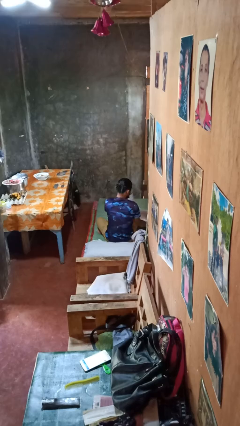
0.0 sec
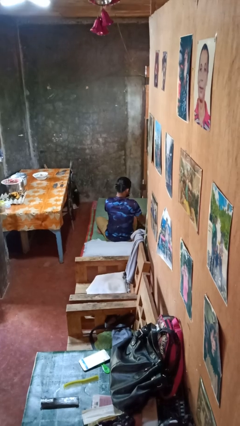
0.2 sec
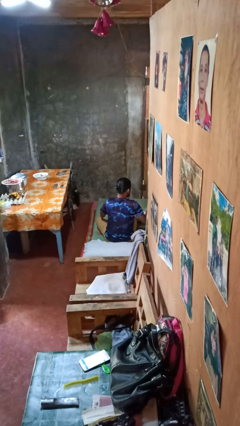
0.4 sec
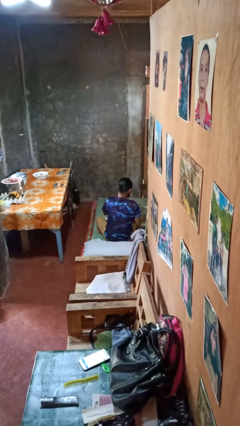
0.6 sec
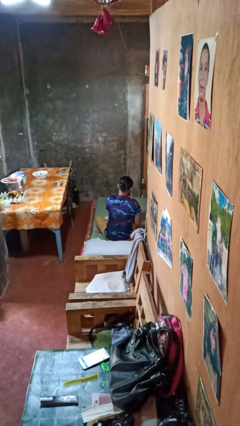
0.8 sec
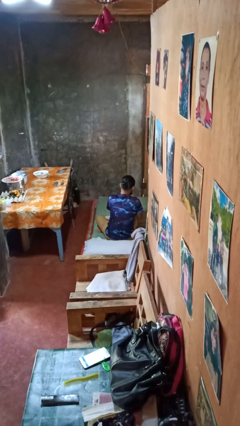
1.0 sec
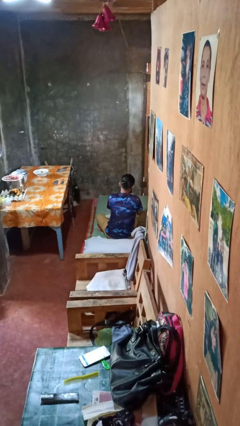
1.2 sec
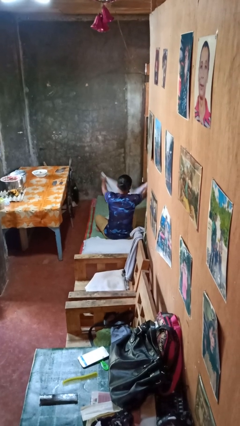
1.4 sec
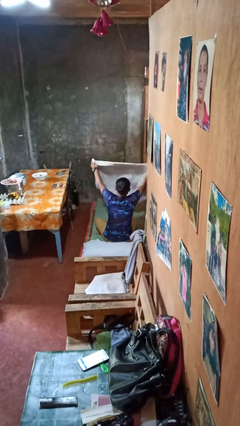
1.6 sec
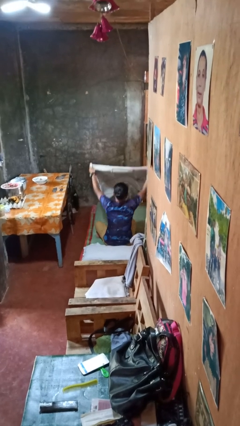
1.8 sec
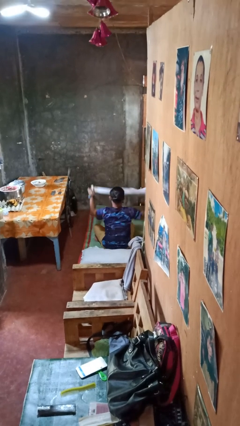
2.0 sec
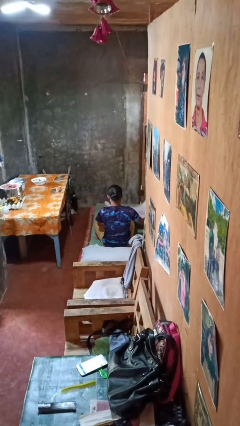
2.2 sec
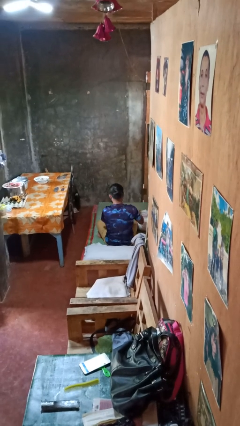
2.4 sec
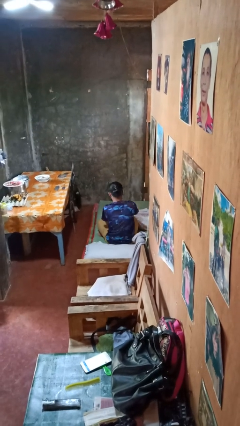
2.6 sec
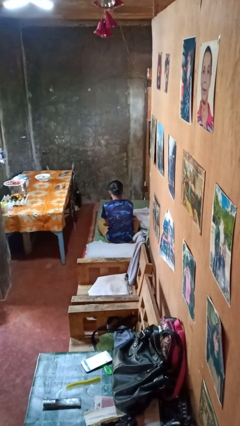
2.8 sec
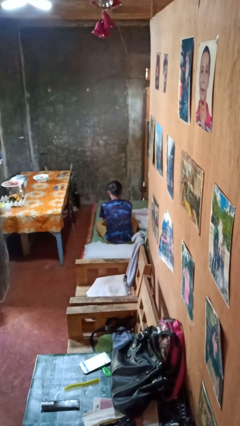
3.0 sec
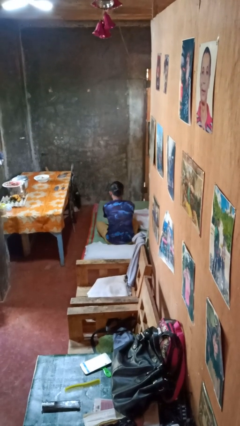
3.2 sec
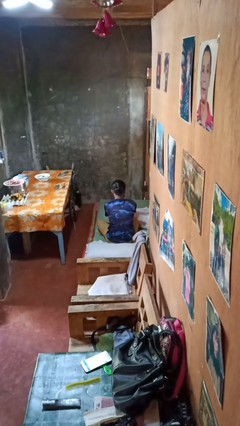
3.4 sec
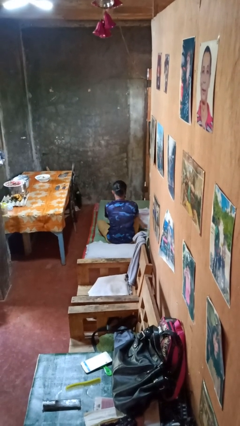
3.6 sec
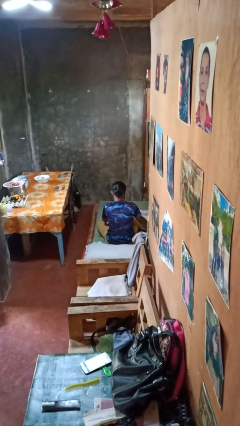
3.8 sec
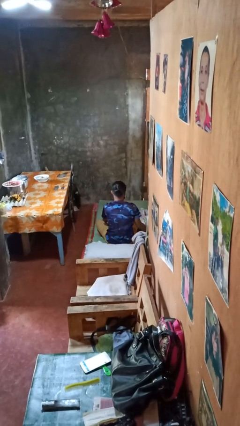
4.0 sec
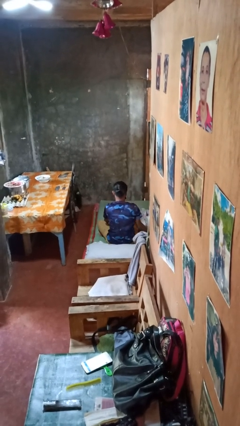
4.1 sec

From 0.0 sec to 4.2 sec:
person unfolds blanket

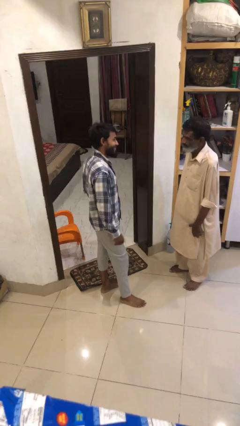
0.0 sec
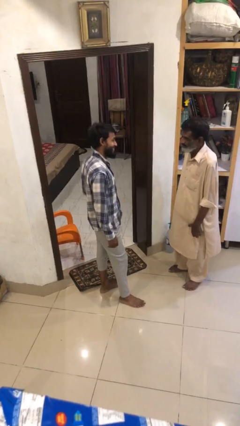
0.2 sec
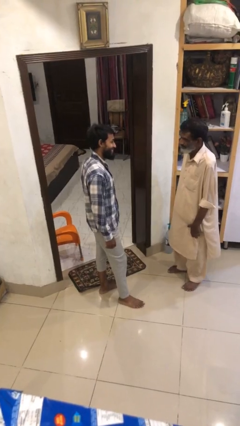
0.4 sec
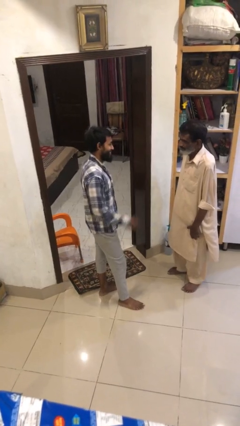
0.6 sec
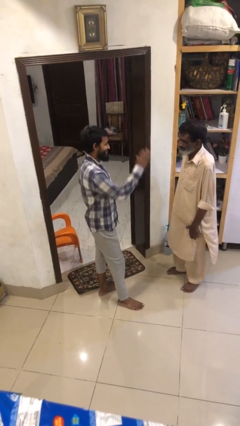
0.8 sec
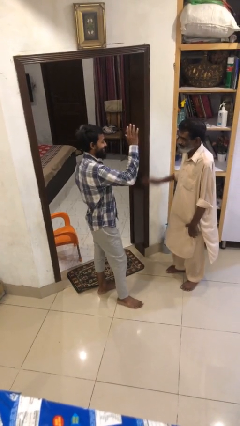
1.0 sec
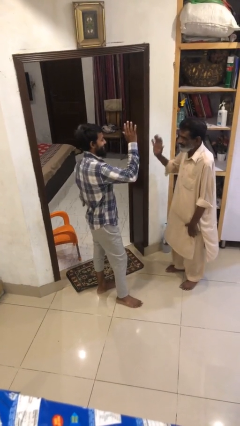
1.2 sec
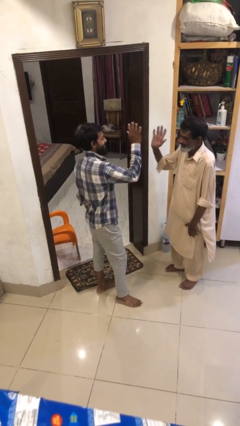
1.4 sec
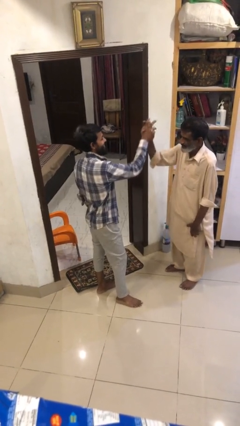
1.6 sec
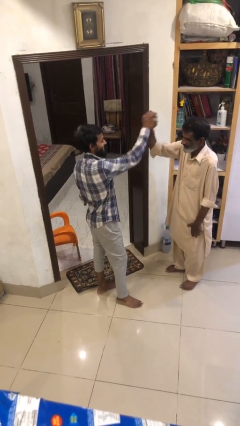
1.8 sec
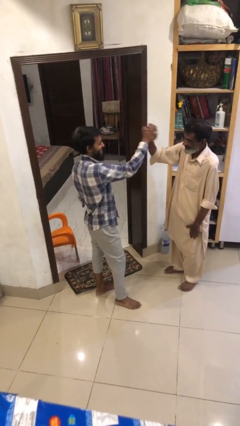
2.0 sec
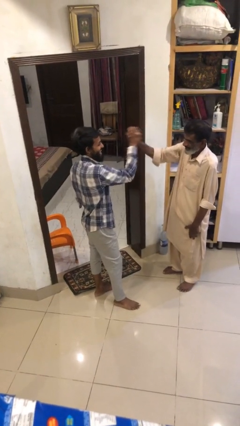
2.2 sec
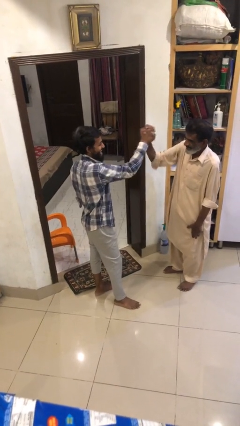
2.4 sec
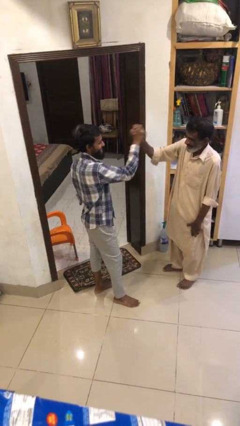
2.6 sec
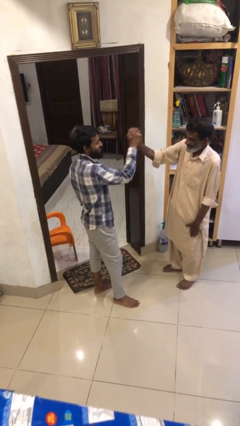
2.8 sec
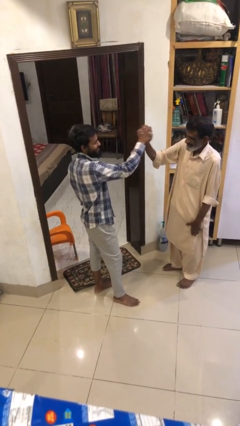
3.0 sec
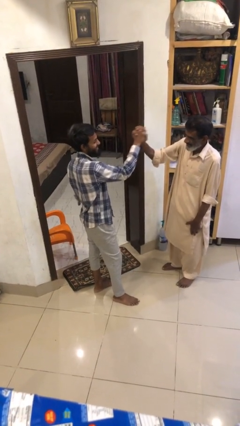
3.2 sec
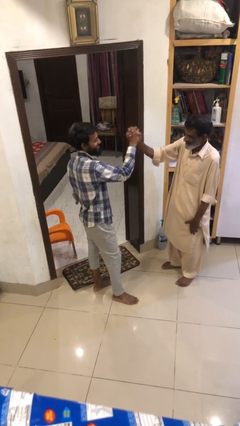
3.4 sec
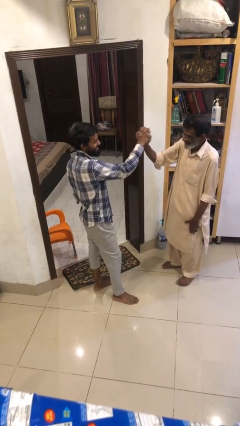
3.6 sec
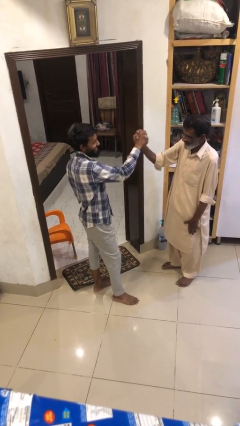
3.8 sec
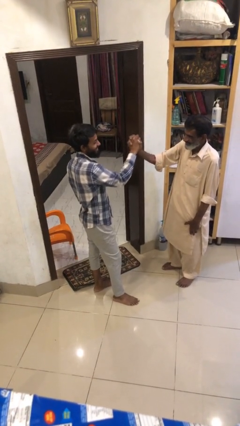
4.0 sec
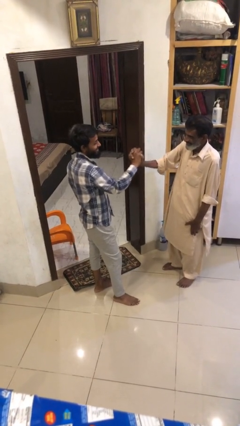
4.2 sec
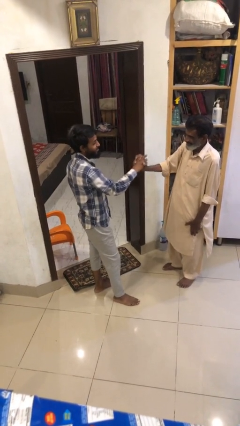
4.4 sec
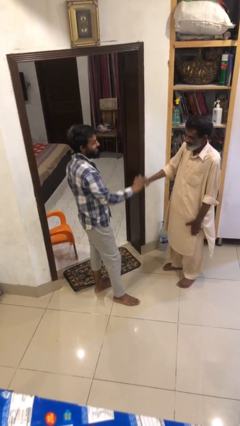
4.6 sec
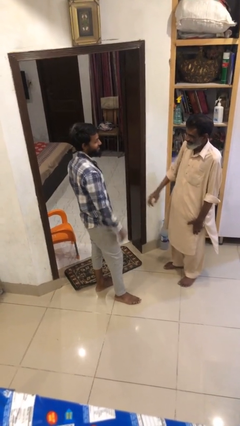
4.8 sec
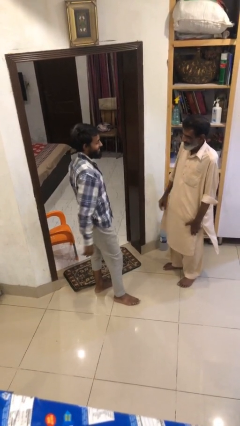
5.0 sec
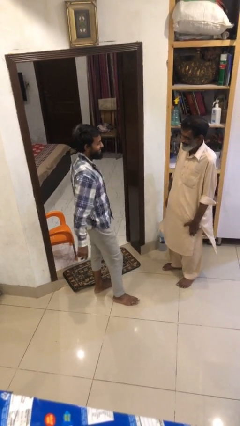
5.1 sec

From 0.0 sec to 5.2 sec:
person highfives hand

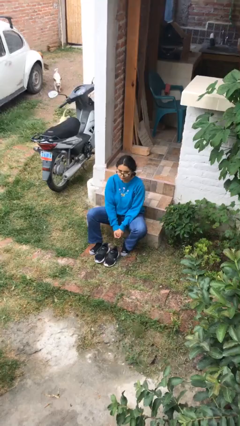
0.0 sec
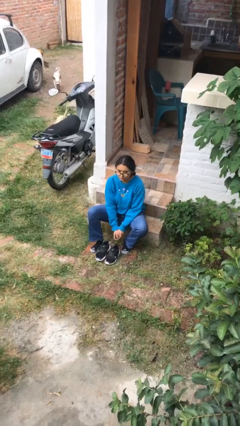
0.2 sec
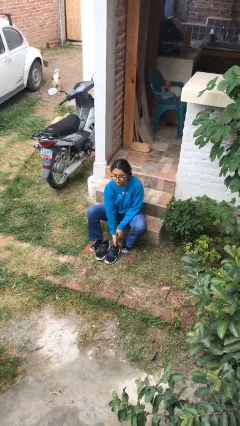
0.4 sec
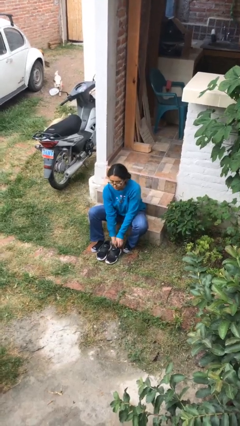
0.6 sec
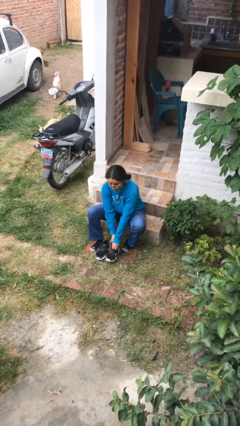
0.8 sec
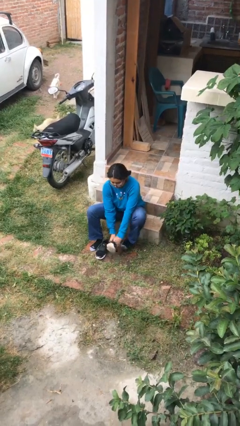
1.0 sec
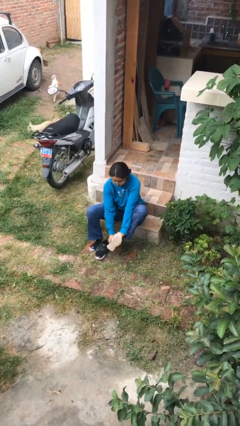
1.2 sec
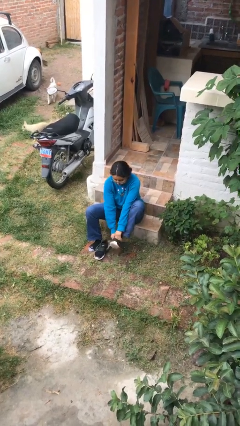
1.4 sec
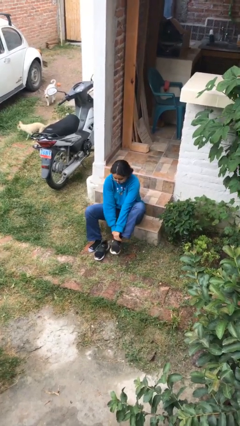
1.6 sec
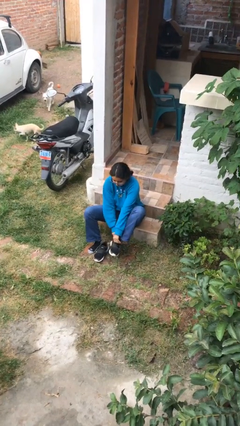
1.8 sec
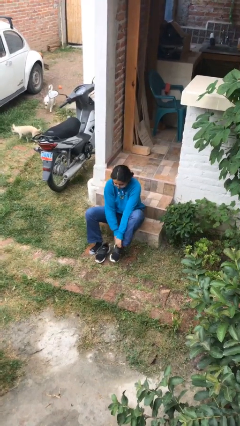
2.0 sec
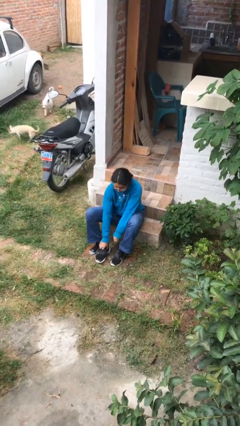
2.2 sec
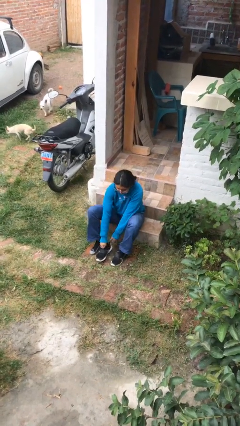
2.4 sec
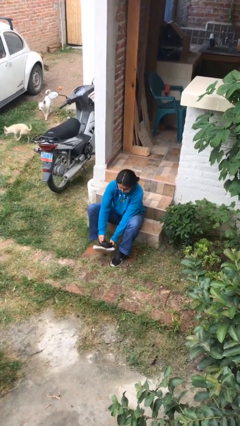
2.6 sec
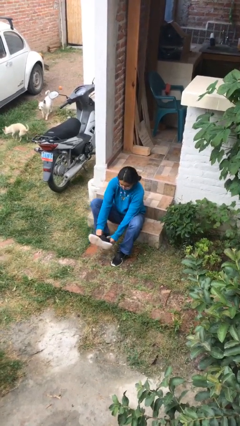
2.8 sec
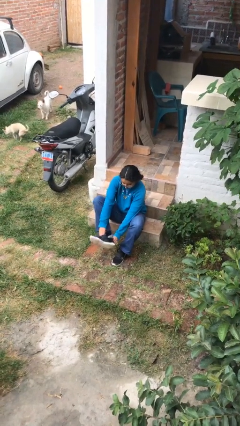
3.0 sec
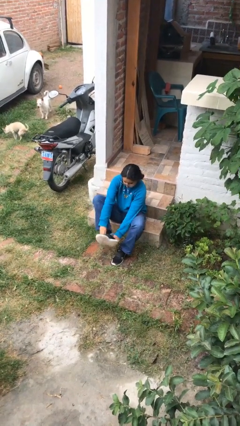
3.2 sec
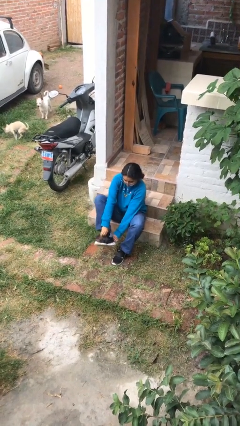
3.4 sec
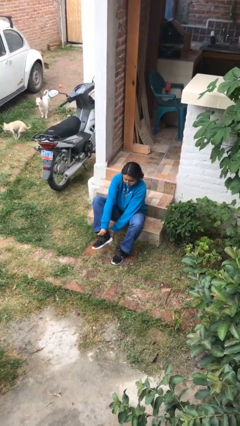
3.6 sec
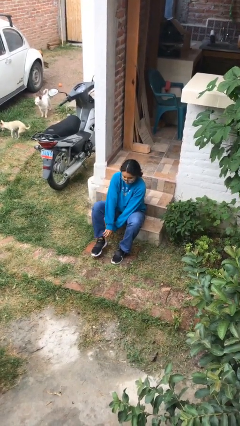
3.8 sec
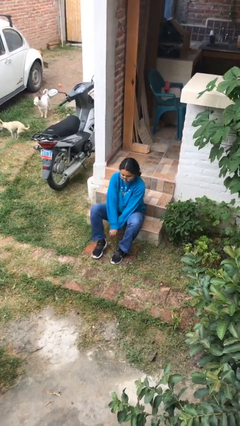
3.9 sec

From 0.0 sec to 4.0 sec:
person puts on shoes

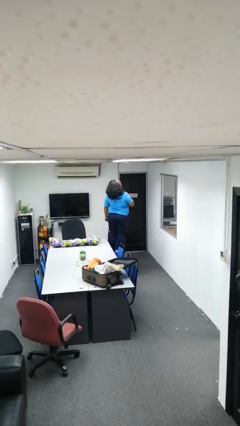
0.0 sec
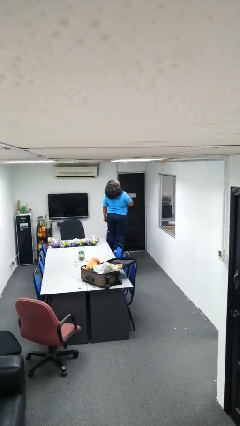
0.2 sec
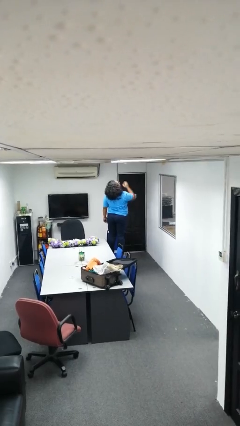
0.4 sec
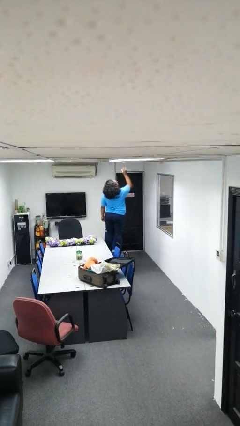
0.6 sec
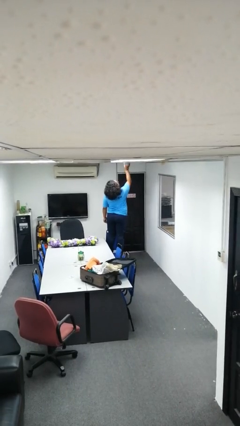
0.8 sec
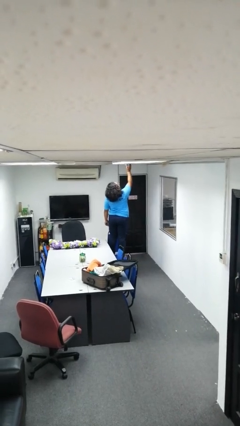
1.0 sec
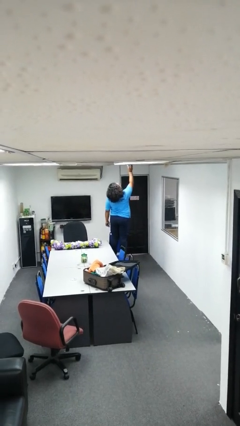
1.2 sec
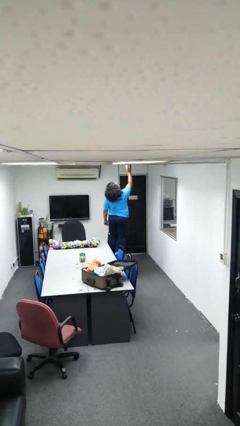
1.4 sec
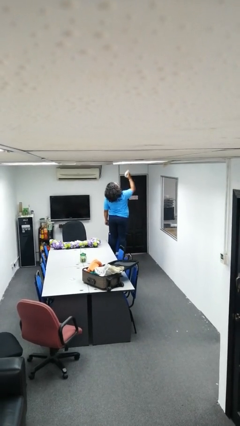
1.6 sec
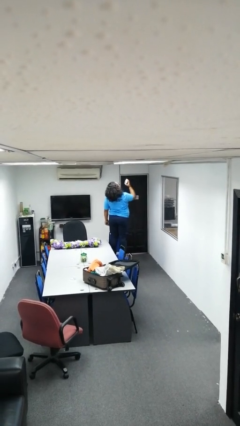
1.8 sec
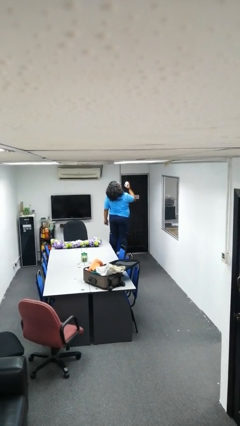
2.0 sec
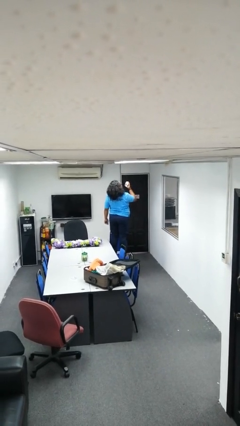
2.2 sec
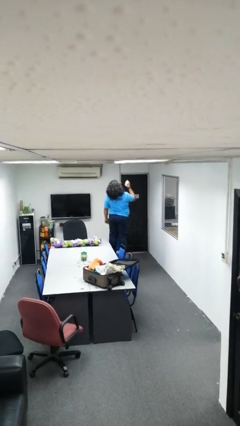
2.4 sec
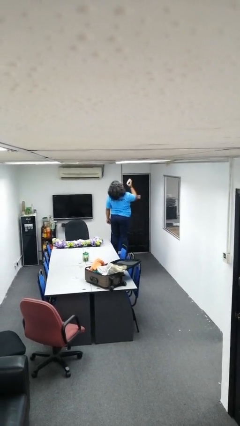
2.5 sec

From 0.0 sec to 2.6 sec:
person takes down smoke detector

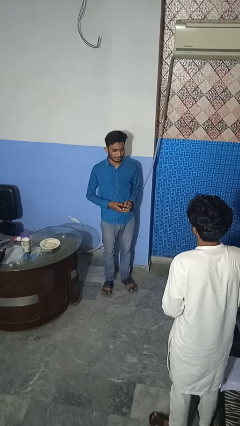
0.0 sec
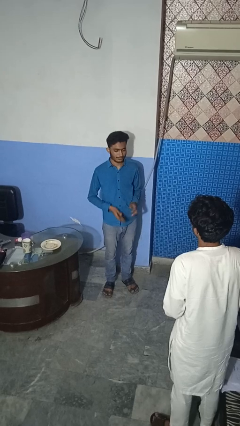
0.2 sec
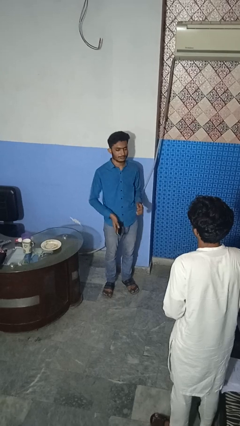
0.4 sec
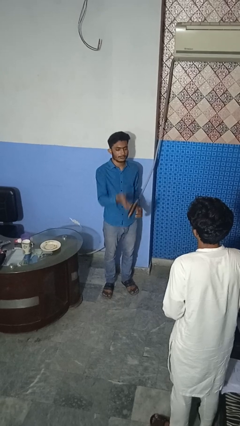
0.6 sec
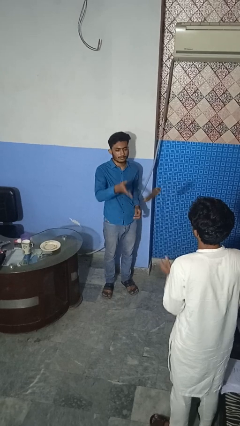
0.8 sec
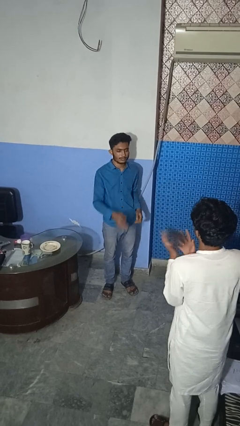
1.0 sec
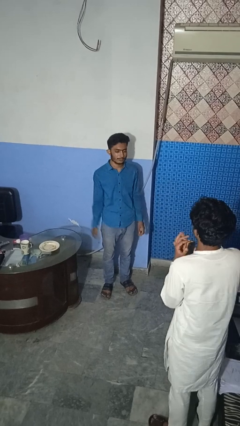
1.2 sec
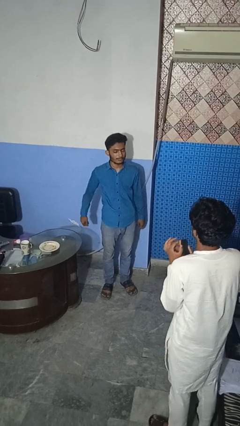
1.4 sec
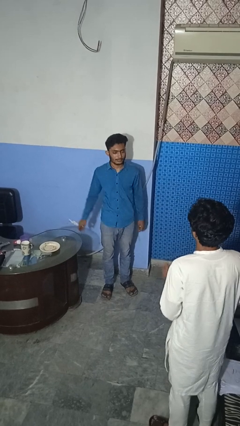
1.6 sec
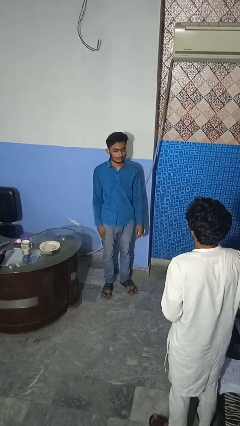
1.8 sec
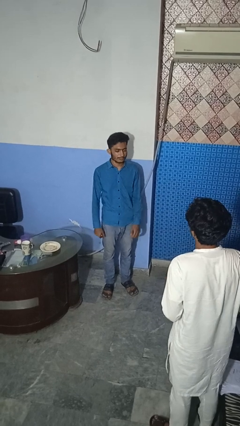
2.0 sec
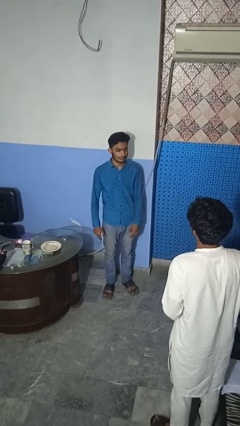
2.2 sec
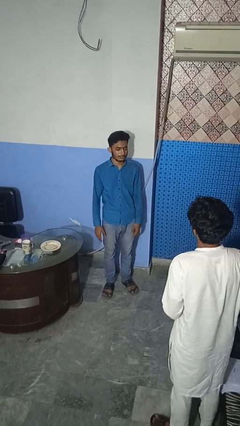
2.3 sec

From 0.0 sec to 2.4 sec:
person throws object to person
